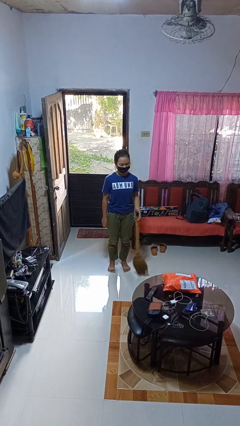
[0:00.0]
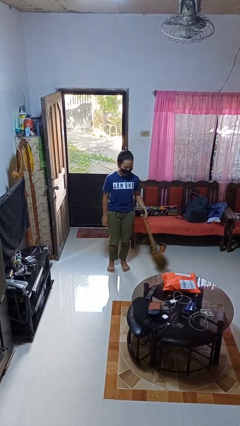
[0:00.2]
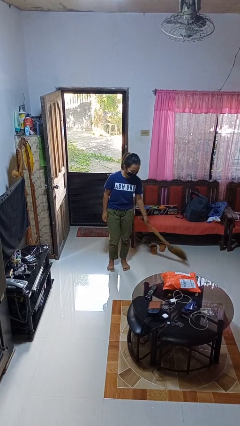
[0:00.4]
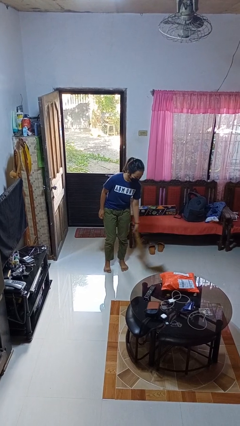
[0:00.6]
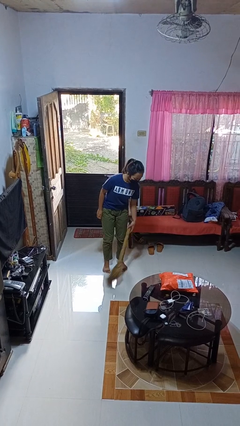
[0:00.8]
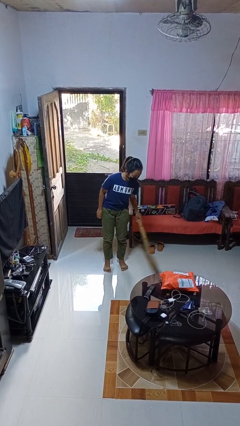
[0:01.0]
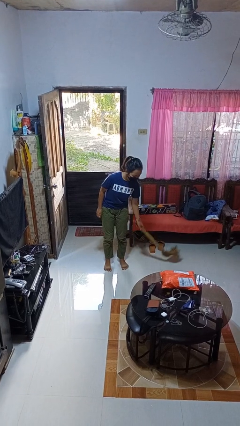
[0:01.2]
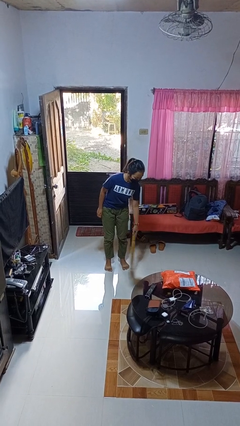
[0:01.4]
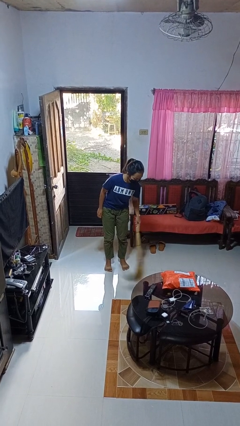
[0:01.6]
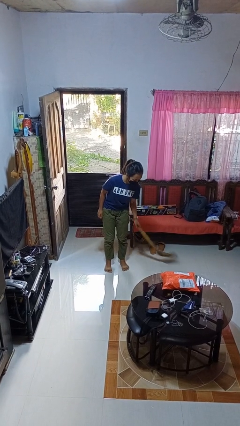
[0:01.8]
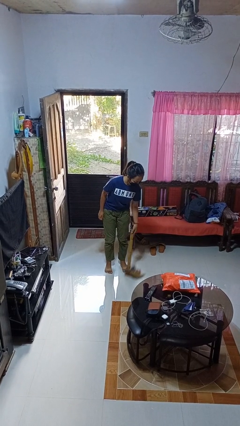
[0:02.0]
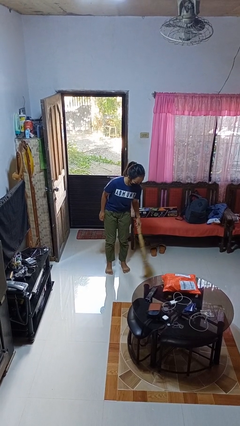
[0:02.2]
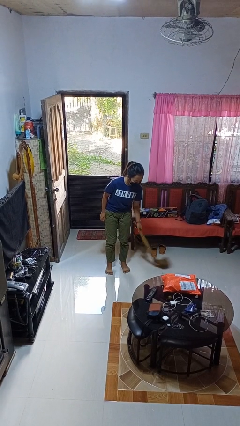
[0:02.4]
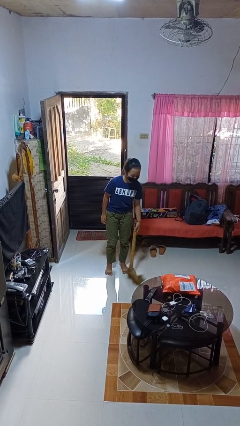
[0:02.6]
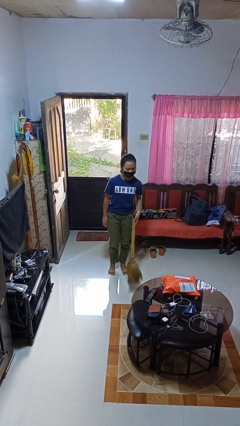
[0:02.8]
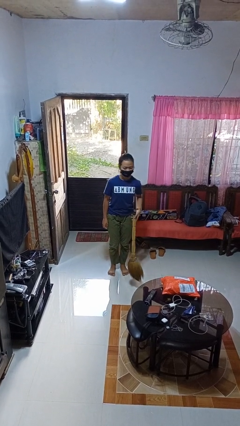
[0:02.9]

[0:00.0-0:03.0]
person sweeps floor

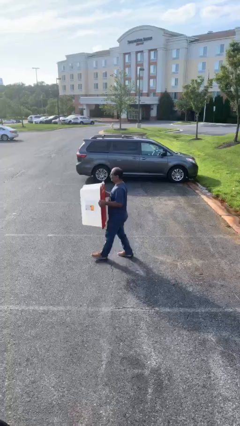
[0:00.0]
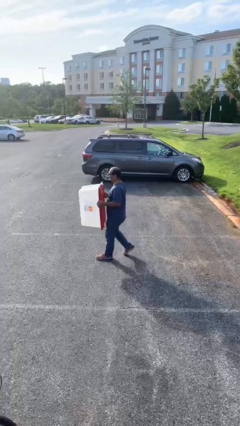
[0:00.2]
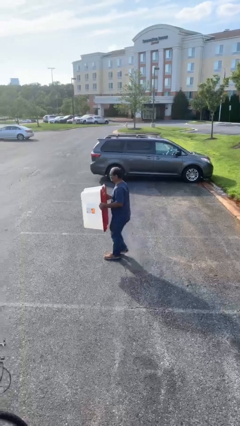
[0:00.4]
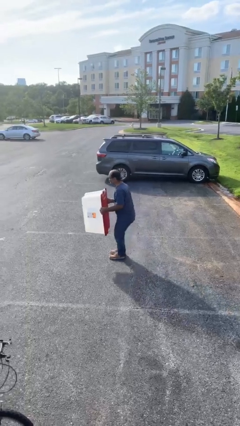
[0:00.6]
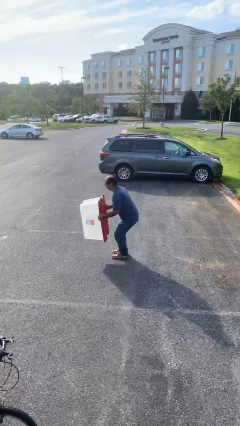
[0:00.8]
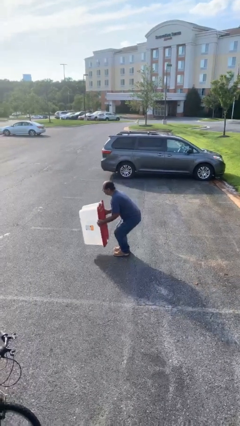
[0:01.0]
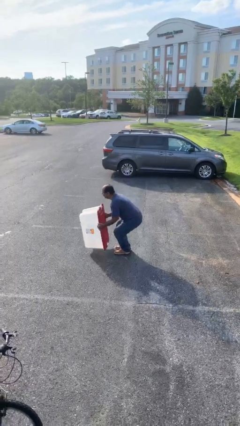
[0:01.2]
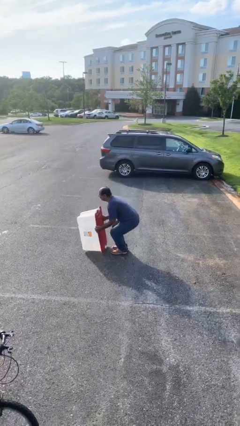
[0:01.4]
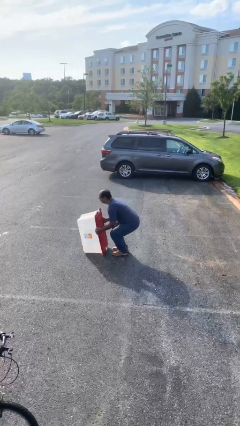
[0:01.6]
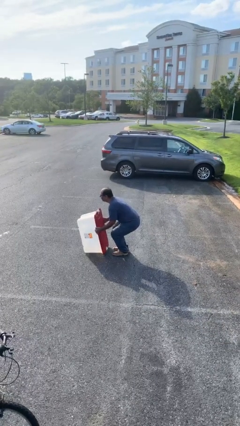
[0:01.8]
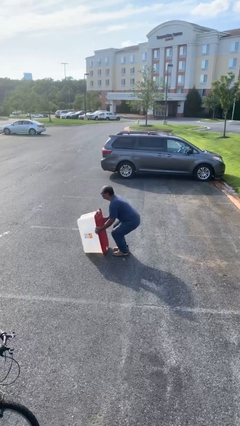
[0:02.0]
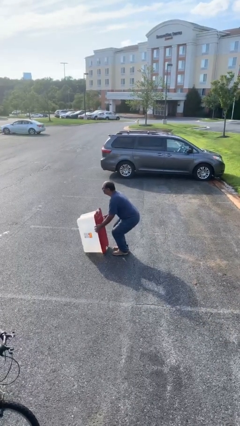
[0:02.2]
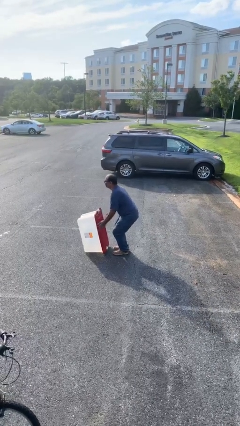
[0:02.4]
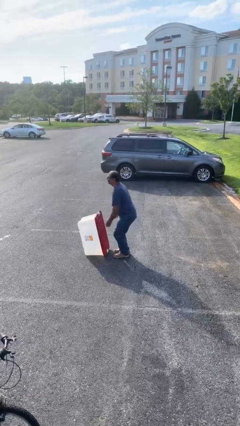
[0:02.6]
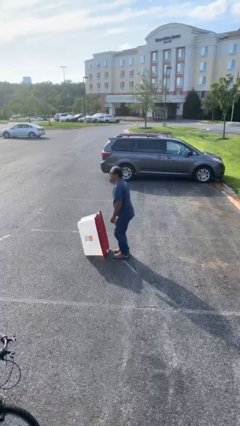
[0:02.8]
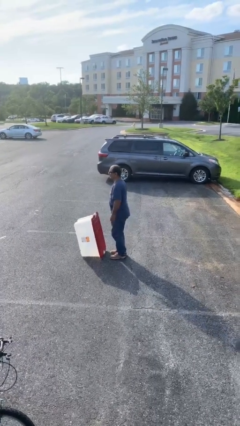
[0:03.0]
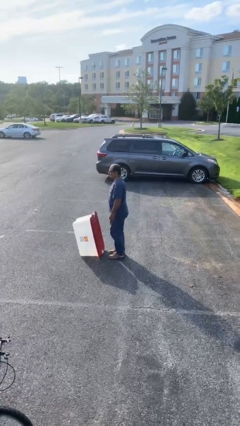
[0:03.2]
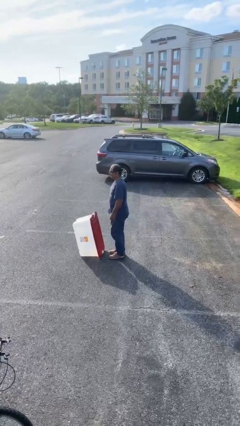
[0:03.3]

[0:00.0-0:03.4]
person puts down object on floor

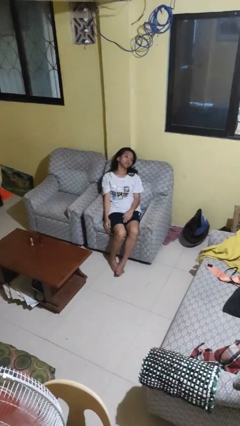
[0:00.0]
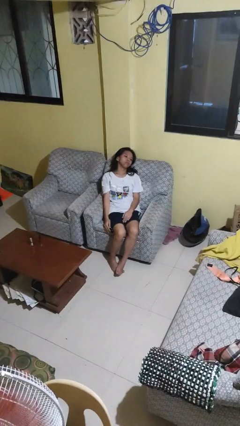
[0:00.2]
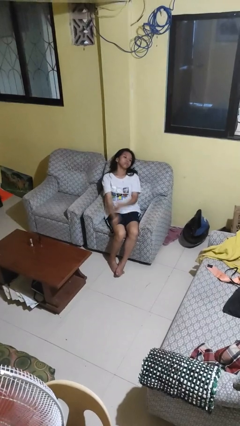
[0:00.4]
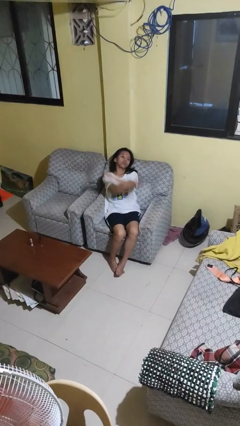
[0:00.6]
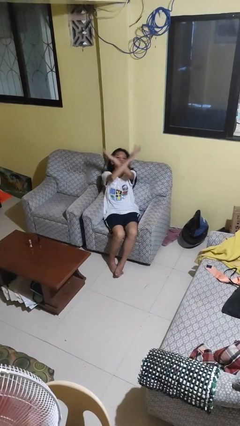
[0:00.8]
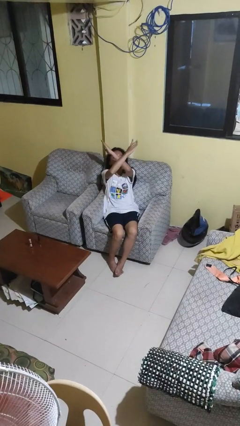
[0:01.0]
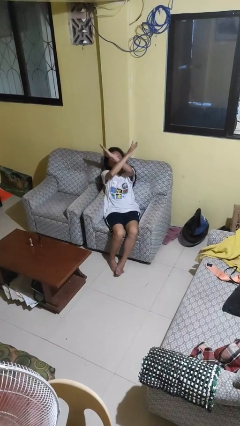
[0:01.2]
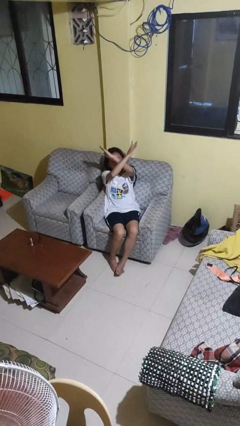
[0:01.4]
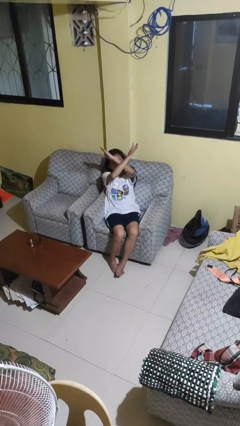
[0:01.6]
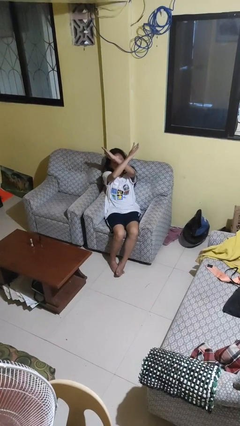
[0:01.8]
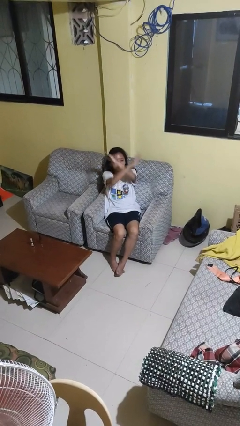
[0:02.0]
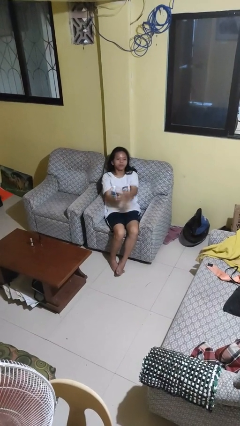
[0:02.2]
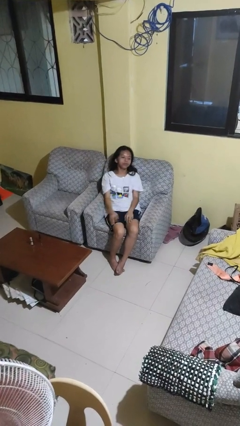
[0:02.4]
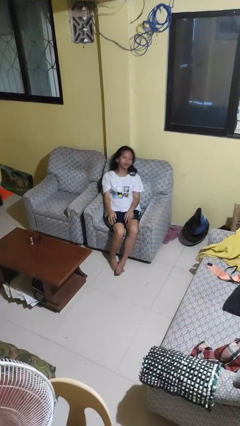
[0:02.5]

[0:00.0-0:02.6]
person gestures arms x

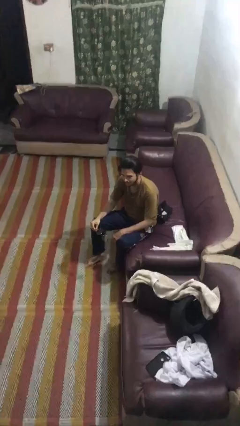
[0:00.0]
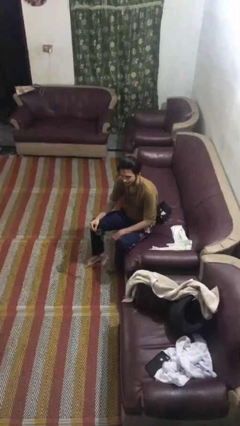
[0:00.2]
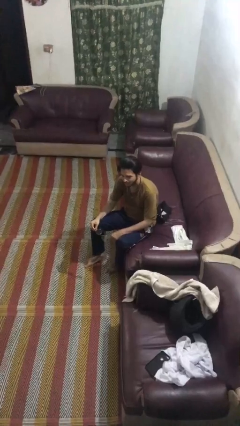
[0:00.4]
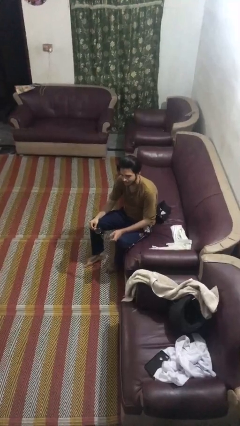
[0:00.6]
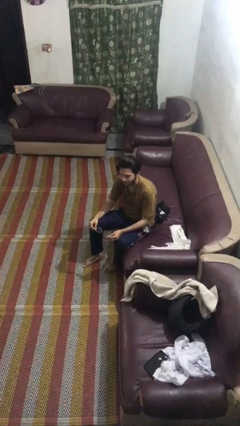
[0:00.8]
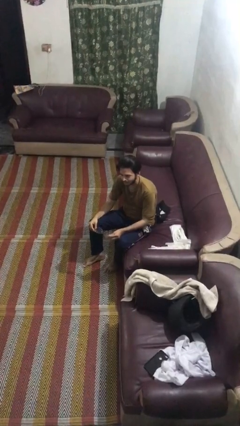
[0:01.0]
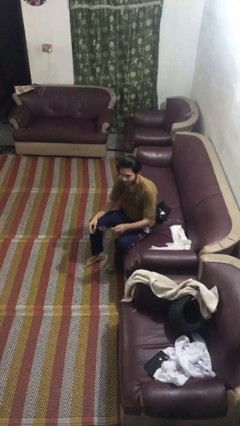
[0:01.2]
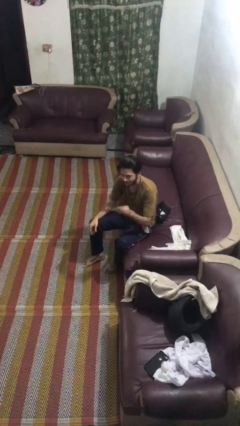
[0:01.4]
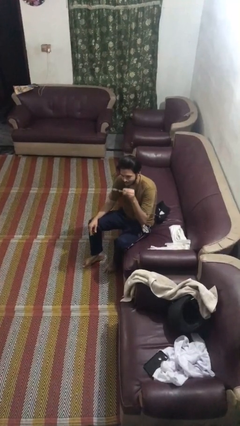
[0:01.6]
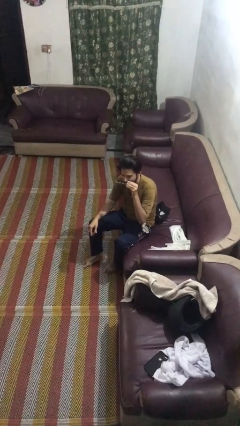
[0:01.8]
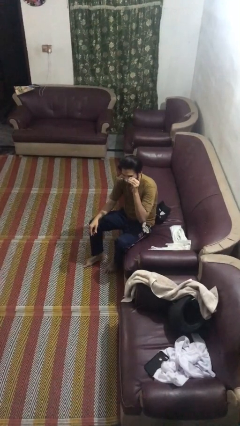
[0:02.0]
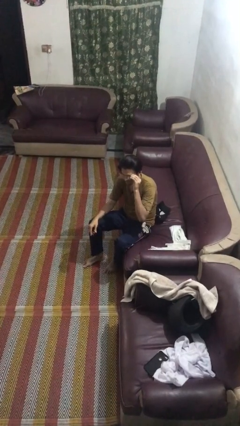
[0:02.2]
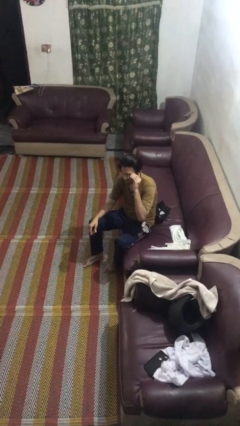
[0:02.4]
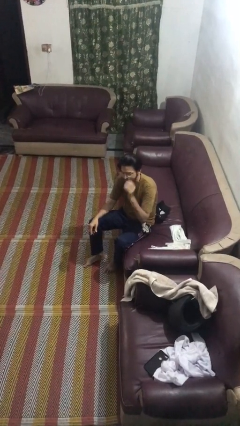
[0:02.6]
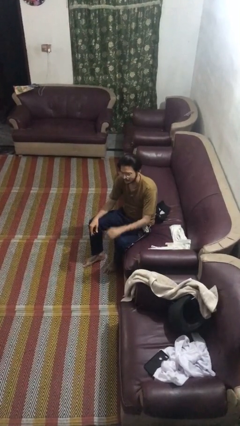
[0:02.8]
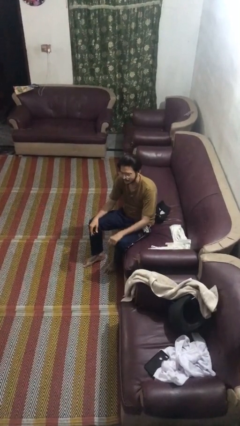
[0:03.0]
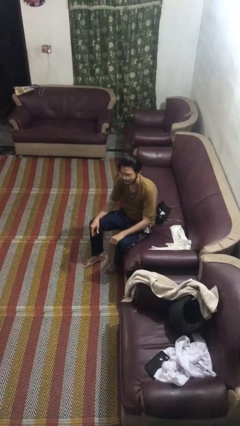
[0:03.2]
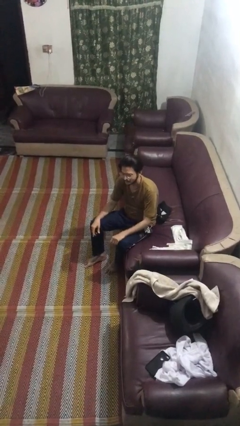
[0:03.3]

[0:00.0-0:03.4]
person puts on glasses

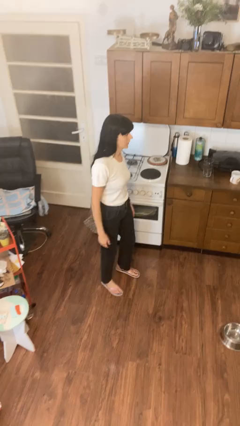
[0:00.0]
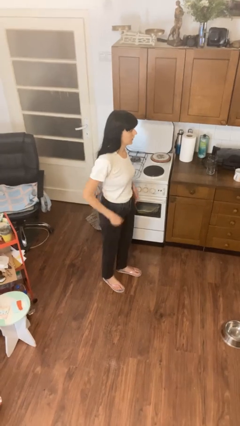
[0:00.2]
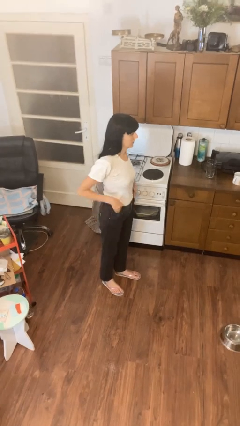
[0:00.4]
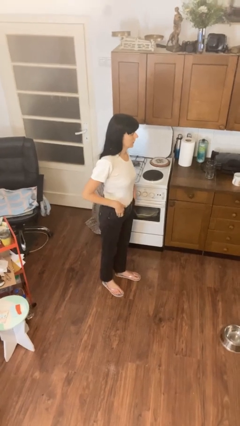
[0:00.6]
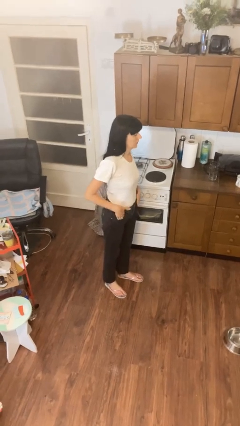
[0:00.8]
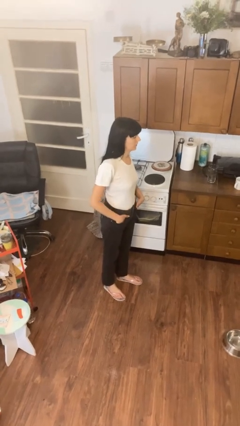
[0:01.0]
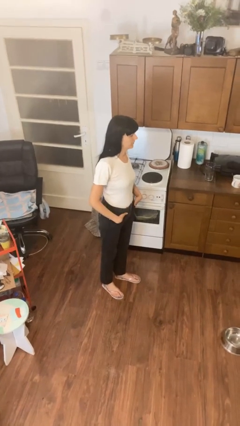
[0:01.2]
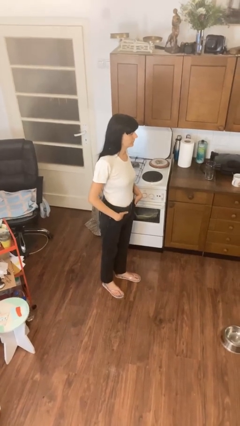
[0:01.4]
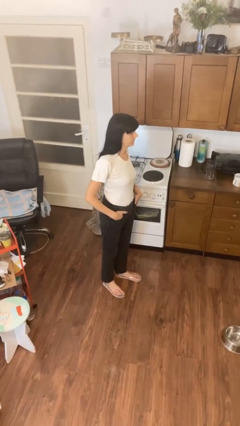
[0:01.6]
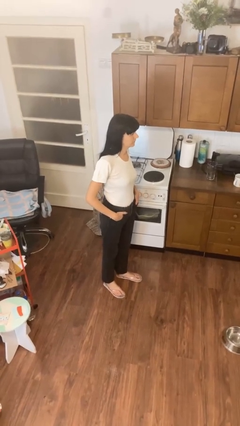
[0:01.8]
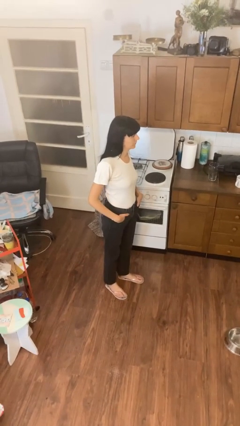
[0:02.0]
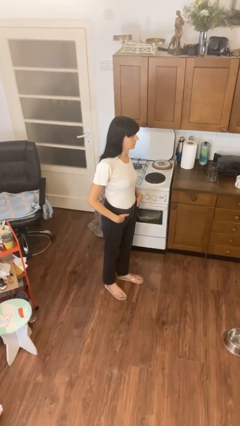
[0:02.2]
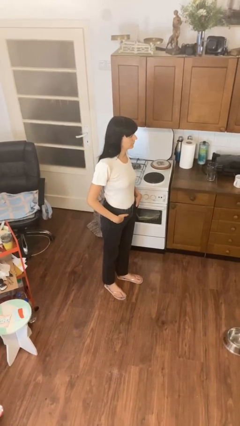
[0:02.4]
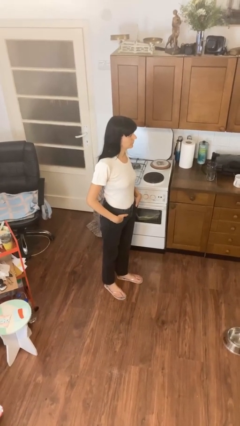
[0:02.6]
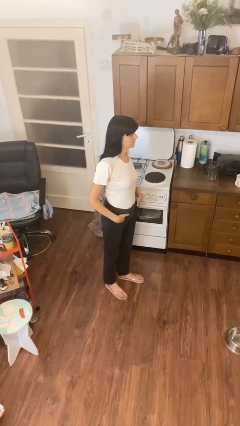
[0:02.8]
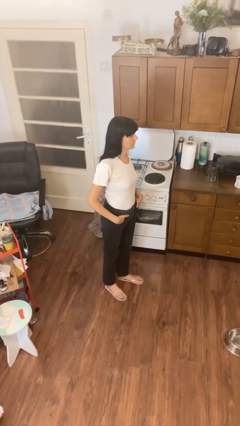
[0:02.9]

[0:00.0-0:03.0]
person puts hands in back pockets

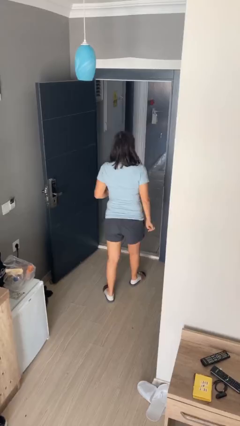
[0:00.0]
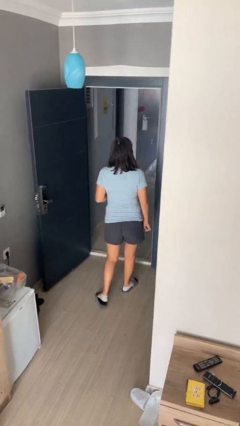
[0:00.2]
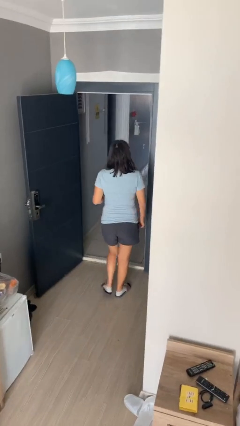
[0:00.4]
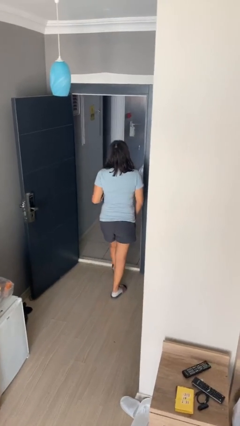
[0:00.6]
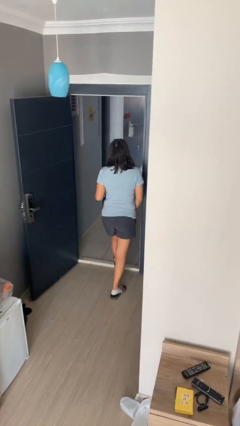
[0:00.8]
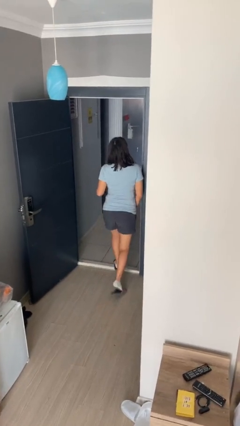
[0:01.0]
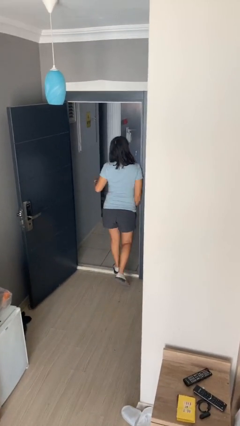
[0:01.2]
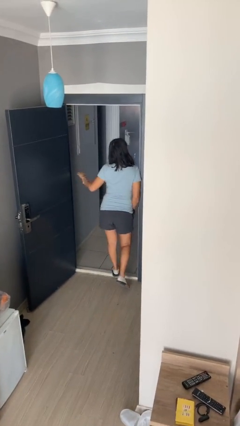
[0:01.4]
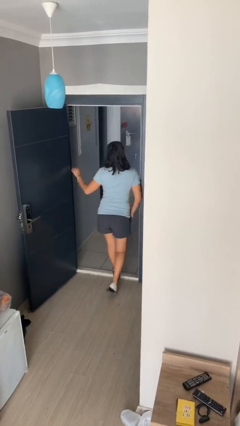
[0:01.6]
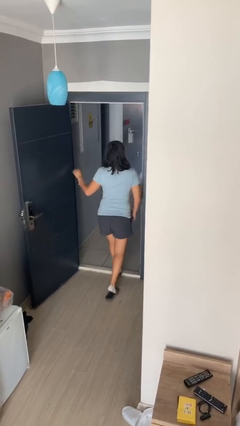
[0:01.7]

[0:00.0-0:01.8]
person bumps into wall

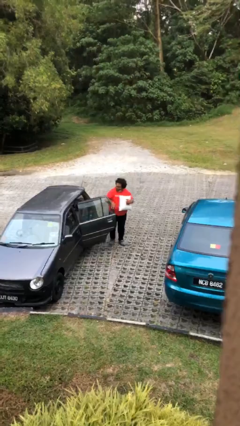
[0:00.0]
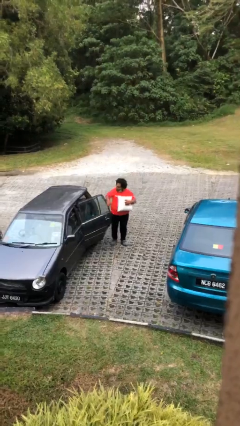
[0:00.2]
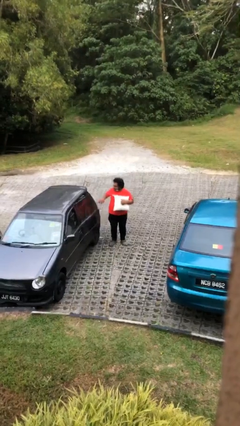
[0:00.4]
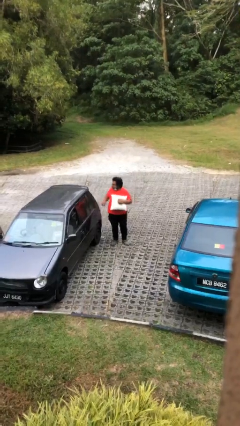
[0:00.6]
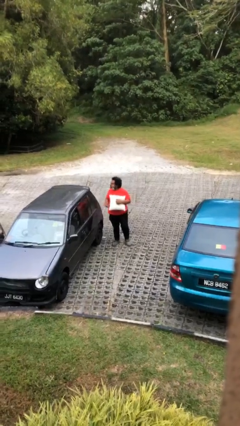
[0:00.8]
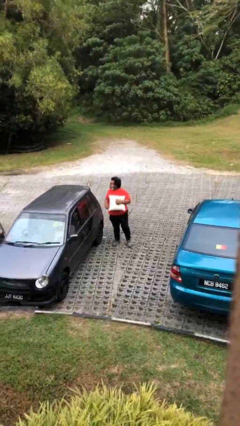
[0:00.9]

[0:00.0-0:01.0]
person closes car door
